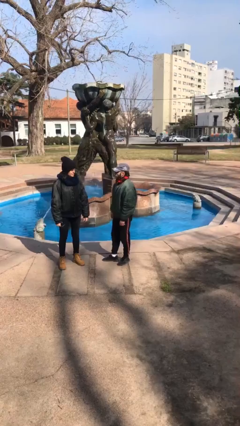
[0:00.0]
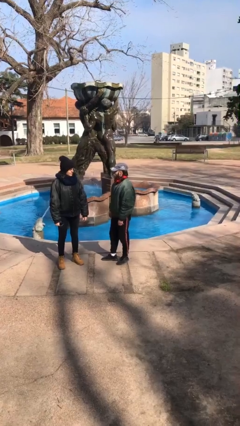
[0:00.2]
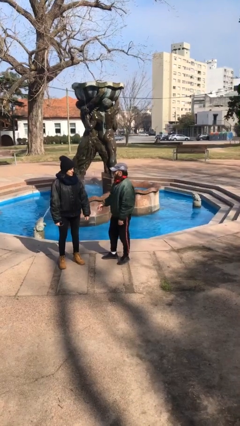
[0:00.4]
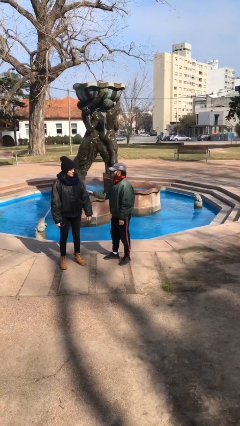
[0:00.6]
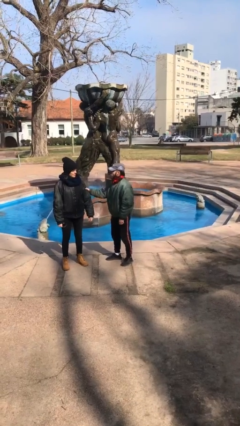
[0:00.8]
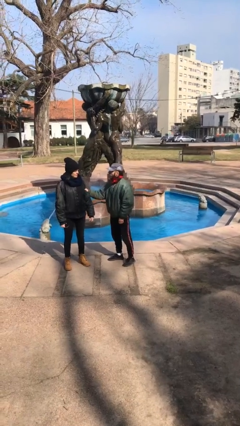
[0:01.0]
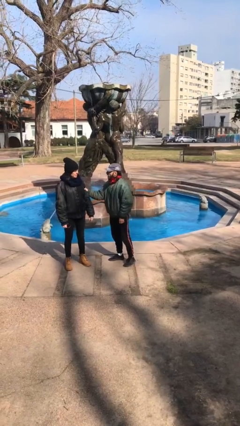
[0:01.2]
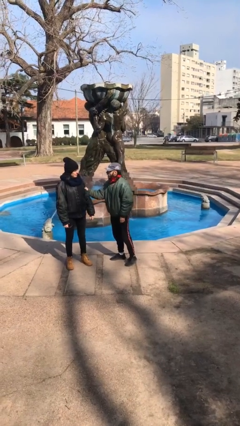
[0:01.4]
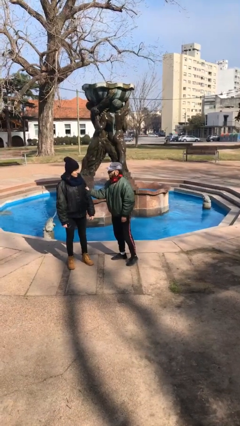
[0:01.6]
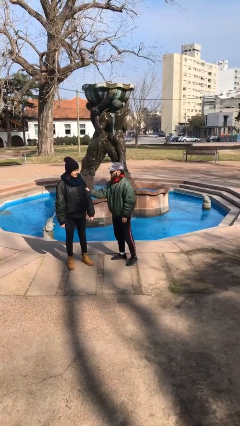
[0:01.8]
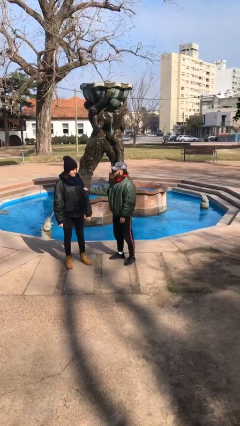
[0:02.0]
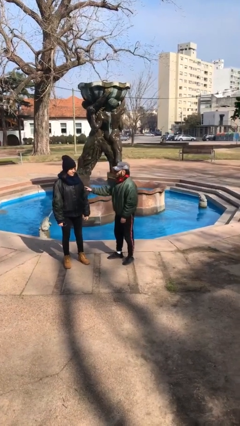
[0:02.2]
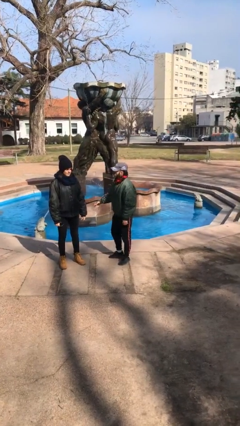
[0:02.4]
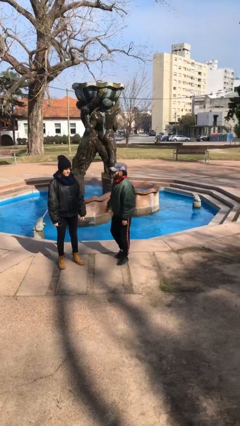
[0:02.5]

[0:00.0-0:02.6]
person grabs person by bicep

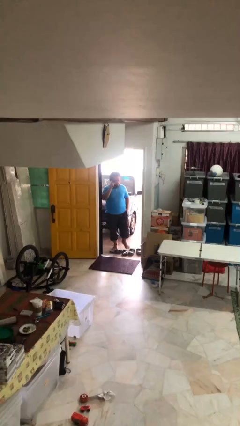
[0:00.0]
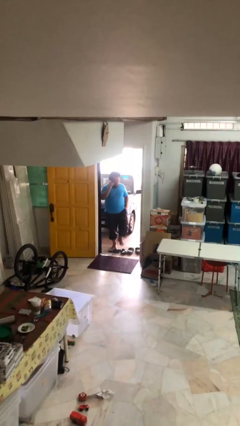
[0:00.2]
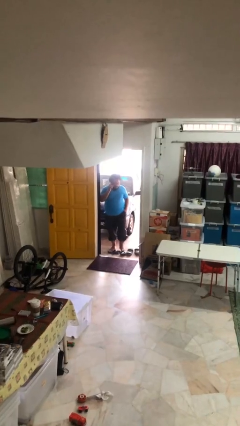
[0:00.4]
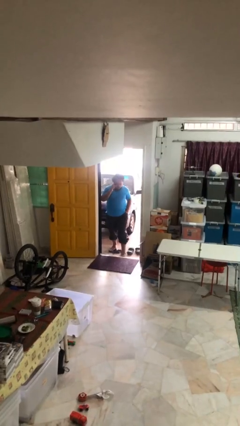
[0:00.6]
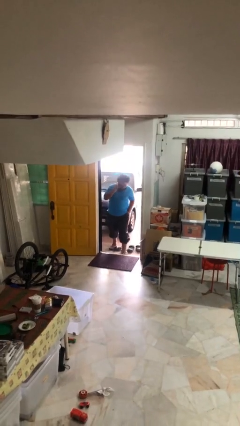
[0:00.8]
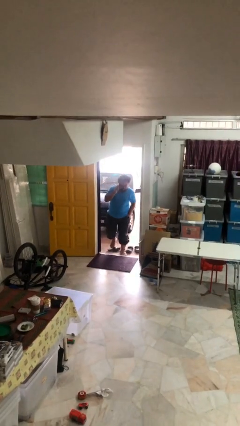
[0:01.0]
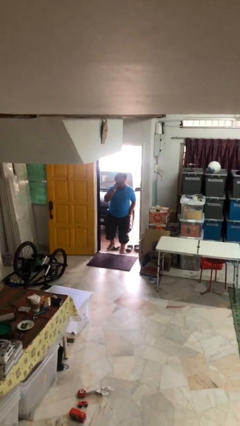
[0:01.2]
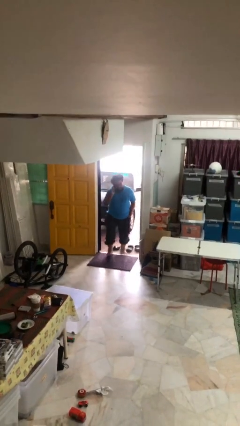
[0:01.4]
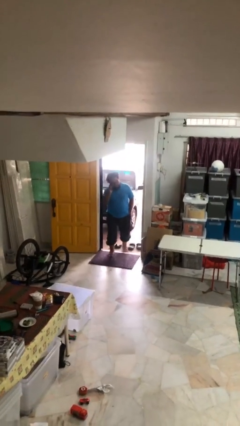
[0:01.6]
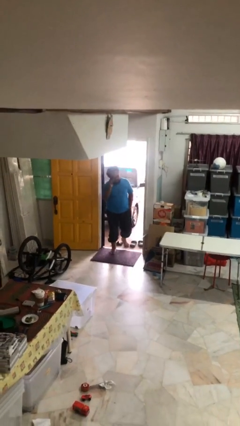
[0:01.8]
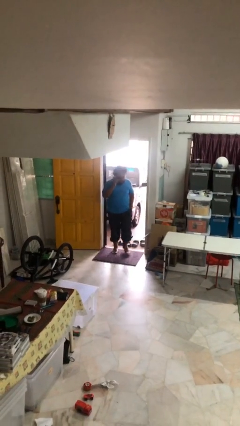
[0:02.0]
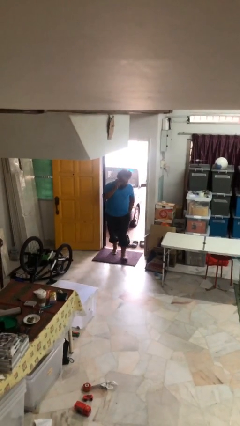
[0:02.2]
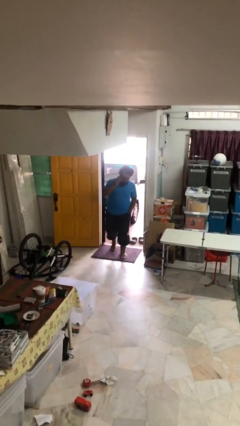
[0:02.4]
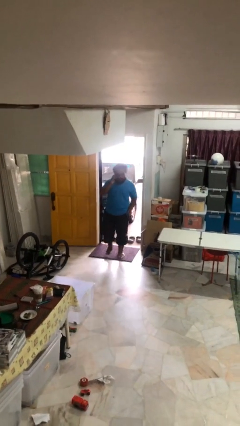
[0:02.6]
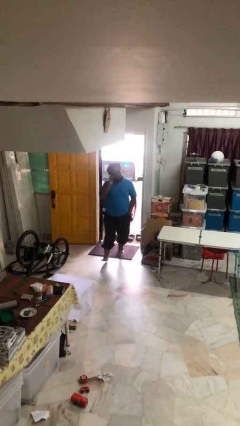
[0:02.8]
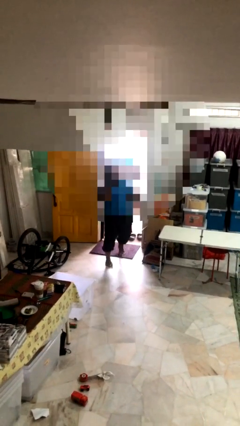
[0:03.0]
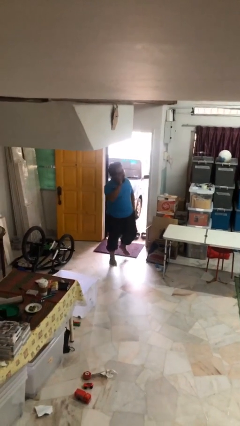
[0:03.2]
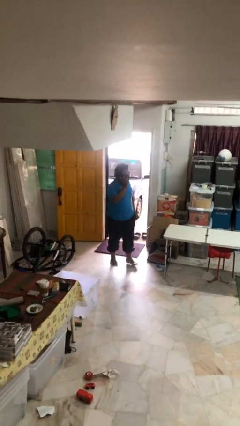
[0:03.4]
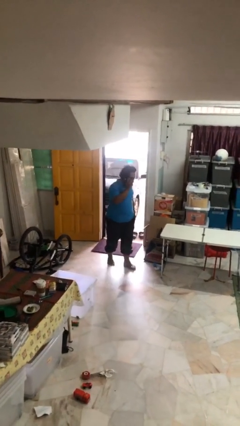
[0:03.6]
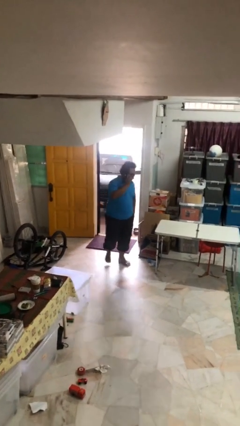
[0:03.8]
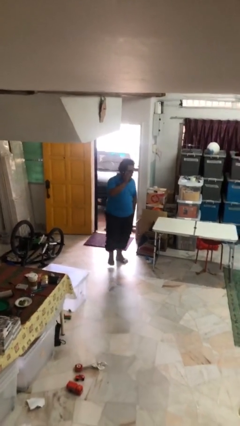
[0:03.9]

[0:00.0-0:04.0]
person enters scene through structure

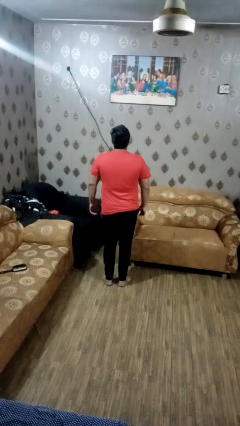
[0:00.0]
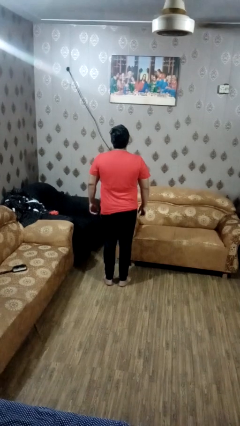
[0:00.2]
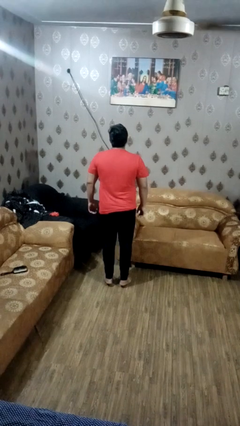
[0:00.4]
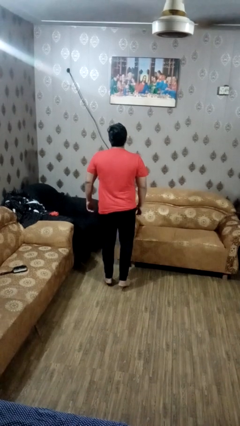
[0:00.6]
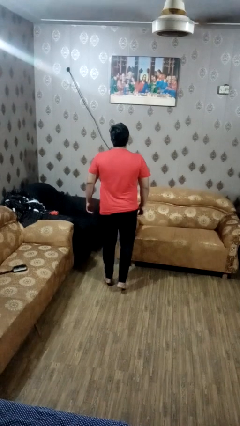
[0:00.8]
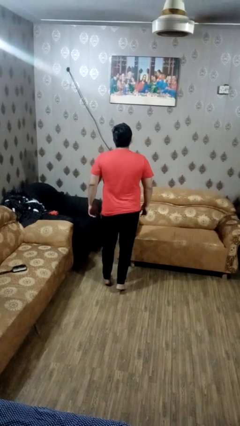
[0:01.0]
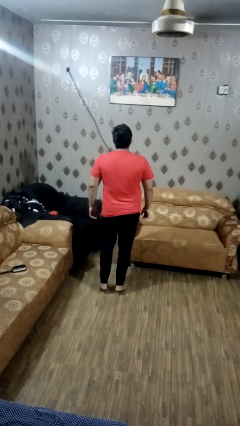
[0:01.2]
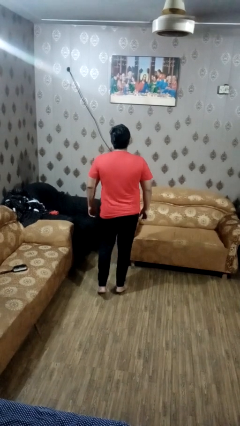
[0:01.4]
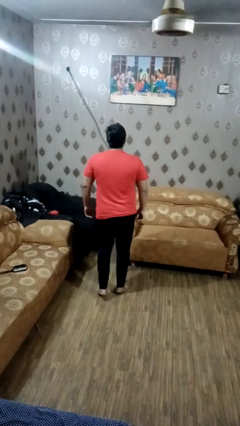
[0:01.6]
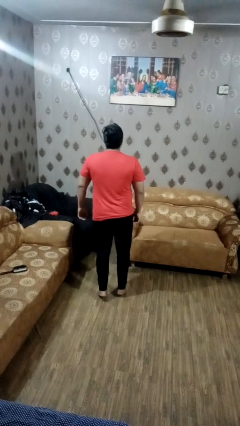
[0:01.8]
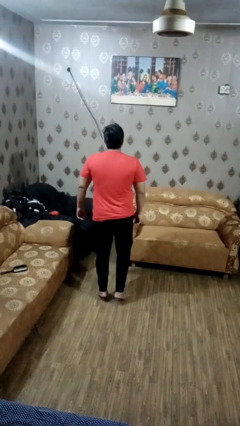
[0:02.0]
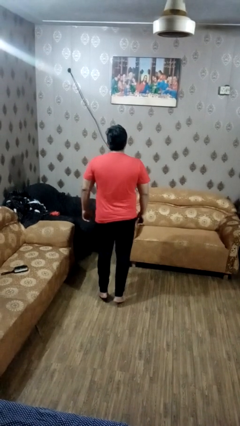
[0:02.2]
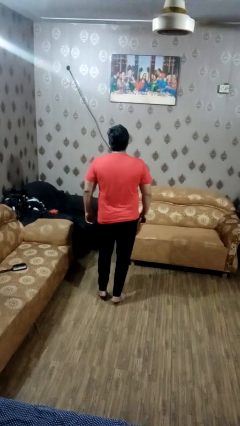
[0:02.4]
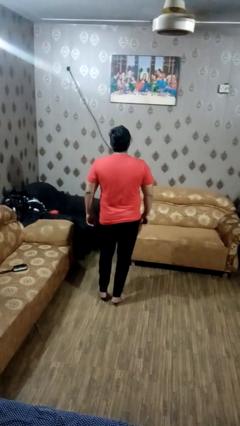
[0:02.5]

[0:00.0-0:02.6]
person walks tiptoe

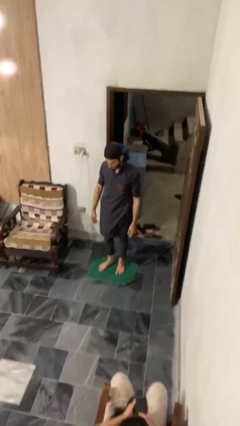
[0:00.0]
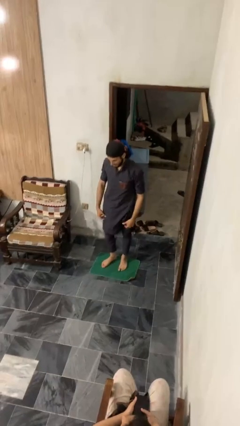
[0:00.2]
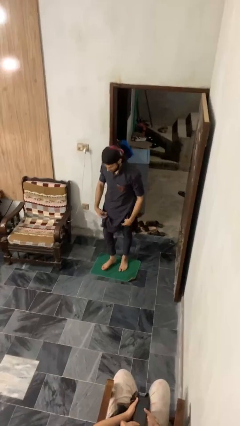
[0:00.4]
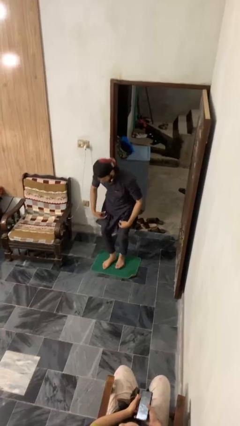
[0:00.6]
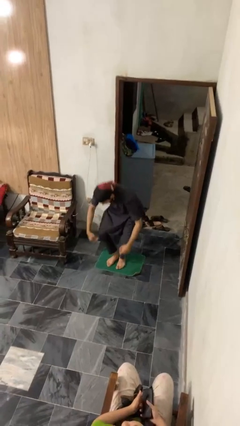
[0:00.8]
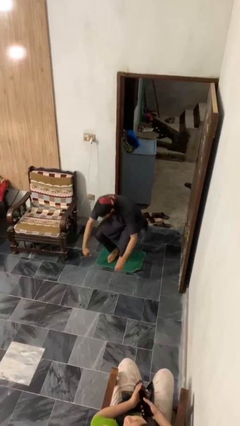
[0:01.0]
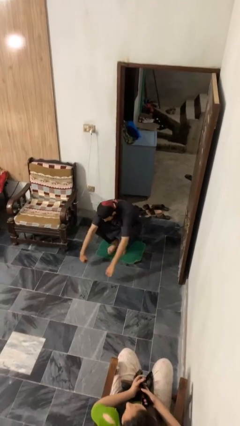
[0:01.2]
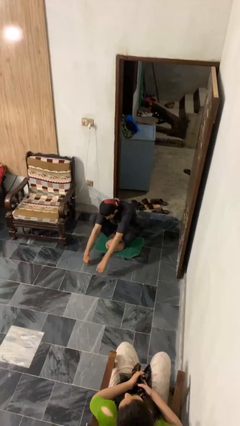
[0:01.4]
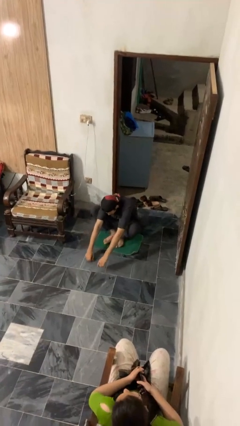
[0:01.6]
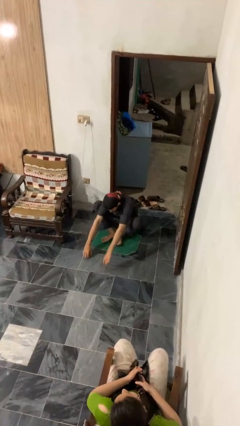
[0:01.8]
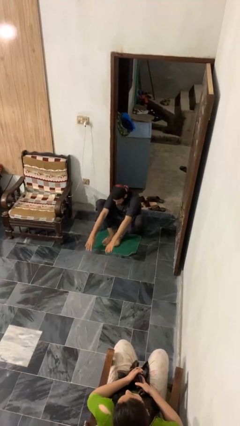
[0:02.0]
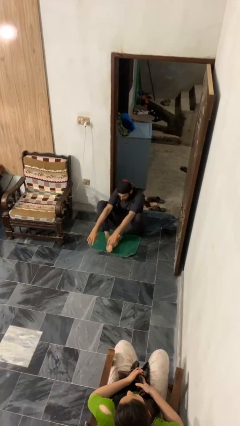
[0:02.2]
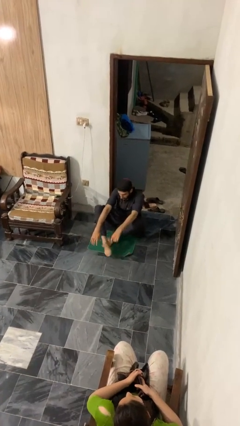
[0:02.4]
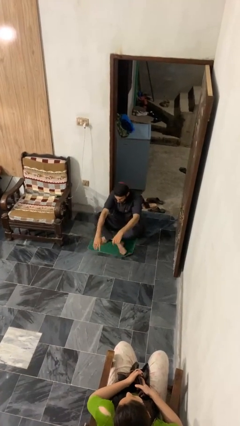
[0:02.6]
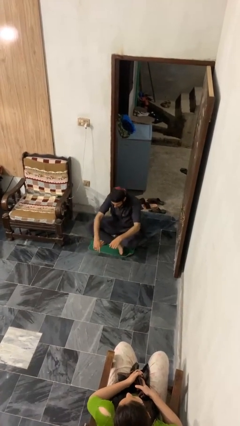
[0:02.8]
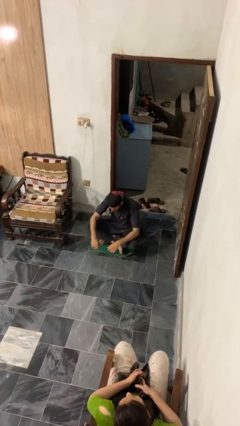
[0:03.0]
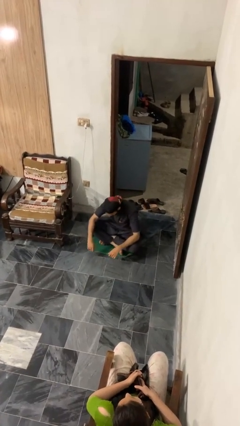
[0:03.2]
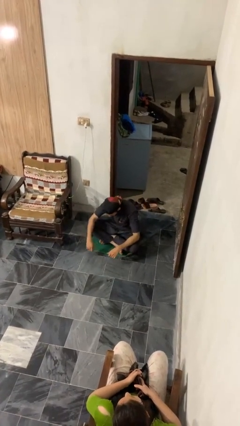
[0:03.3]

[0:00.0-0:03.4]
person sits crisscross

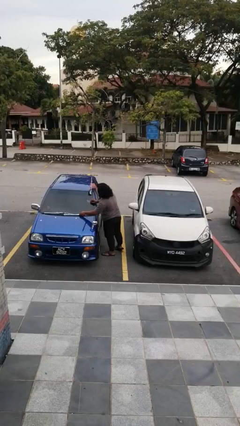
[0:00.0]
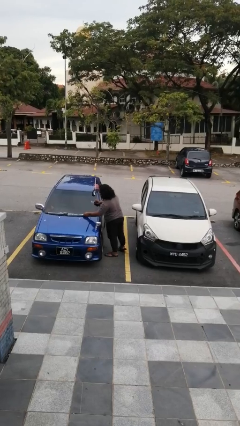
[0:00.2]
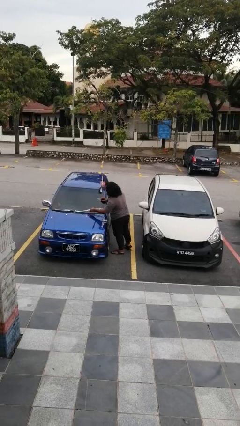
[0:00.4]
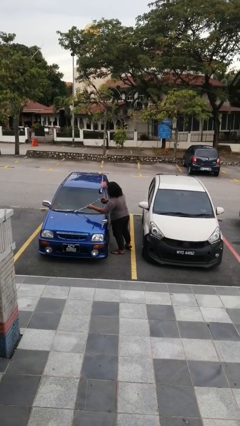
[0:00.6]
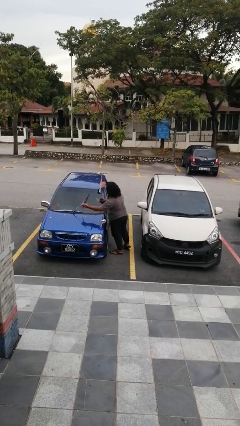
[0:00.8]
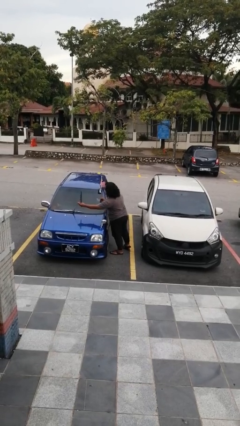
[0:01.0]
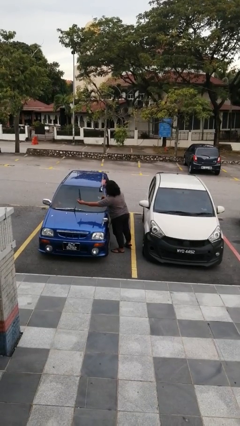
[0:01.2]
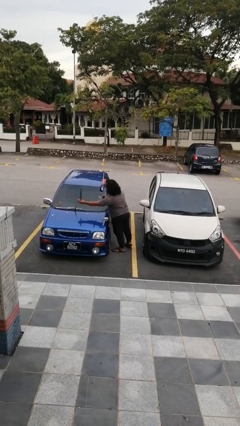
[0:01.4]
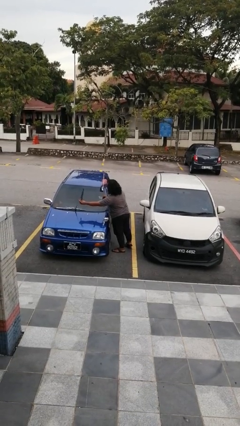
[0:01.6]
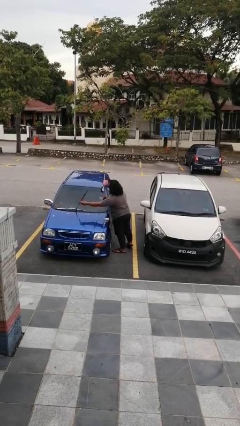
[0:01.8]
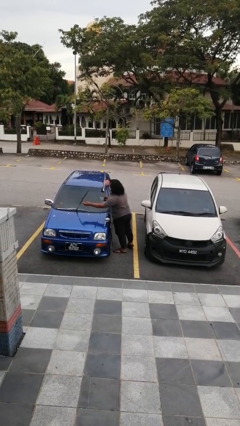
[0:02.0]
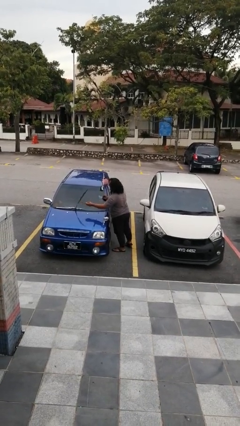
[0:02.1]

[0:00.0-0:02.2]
person flips up car wipers

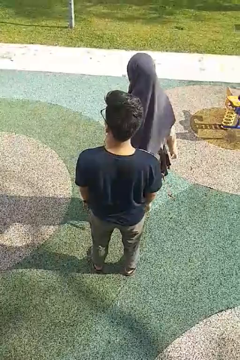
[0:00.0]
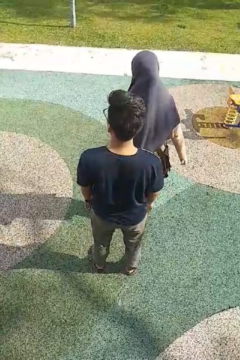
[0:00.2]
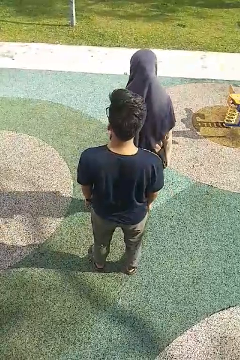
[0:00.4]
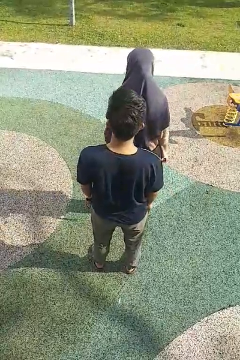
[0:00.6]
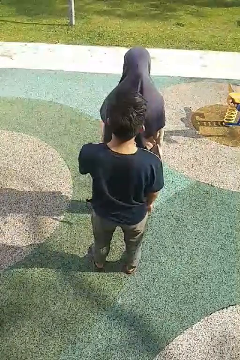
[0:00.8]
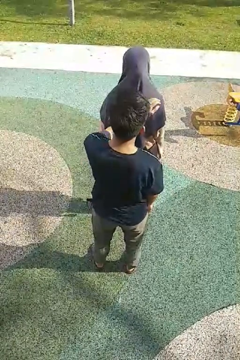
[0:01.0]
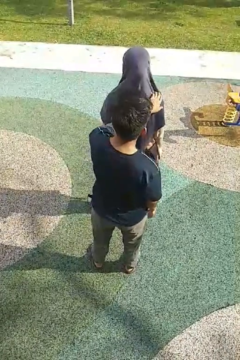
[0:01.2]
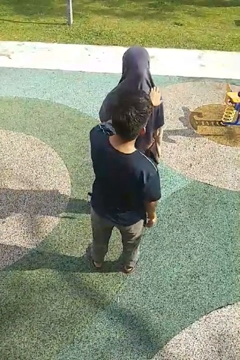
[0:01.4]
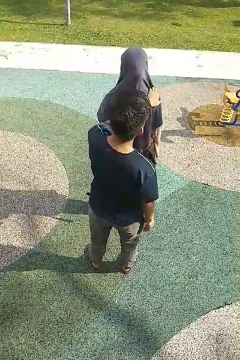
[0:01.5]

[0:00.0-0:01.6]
person grabs person by shoulder

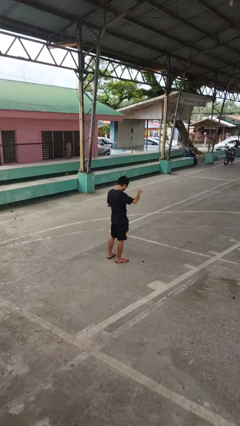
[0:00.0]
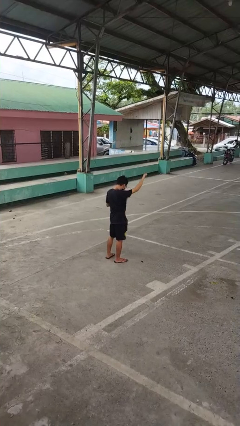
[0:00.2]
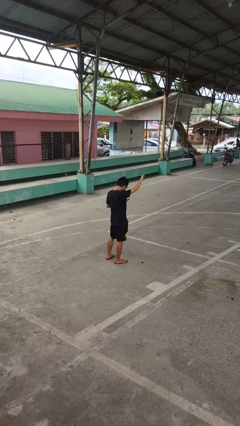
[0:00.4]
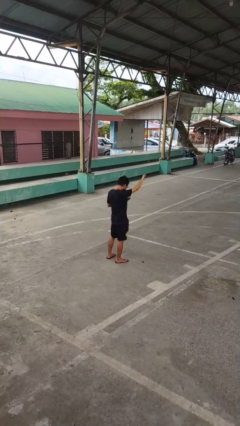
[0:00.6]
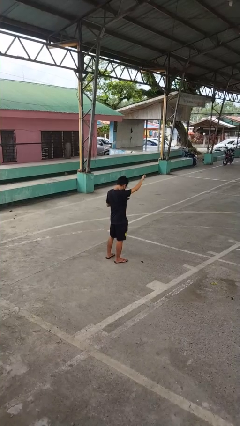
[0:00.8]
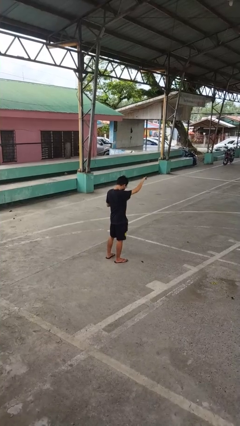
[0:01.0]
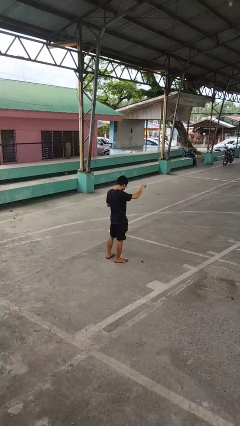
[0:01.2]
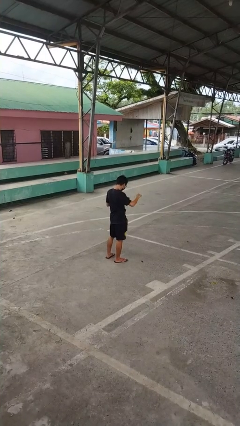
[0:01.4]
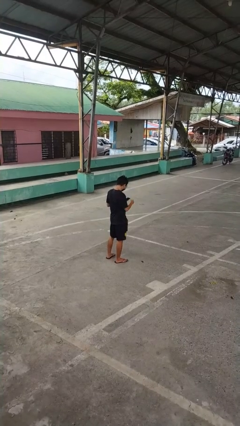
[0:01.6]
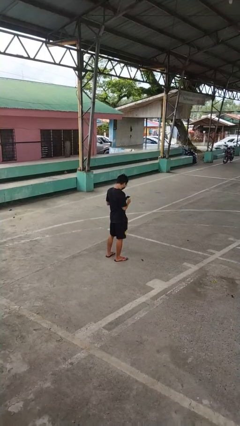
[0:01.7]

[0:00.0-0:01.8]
person gestures thumbs down
